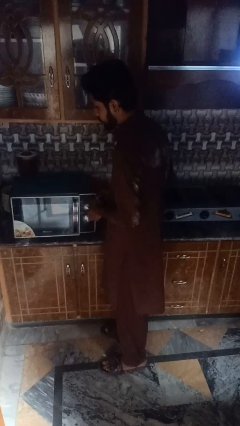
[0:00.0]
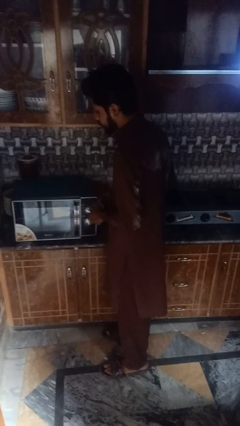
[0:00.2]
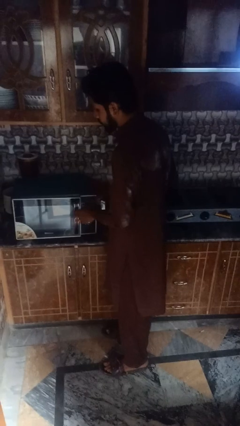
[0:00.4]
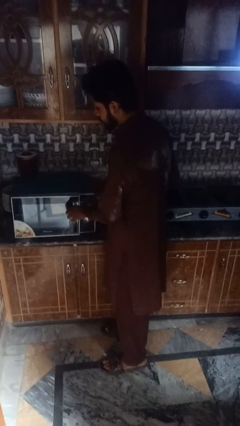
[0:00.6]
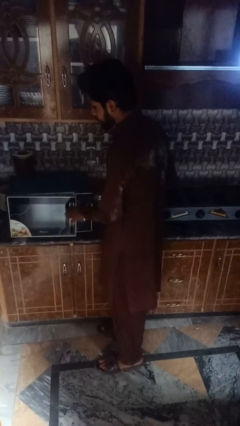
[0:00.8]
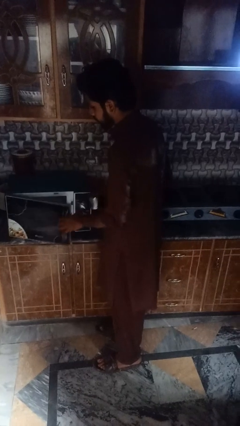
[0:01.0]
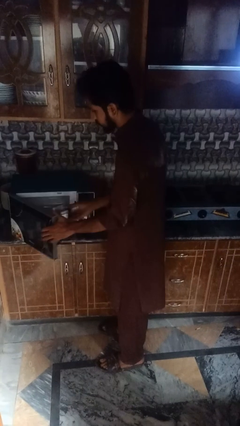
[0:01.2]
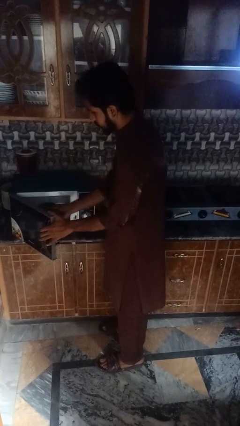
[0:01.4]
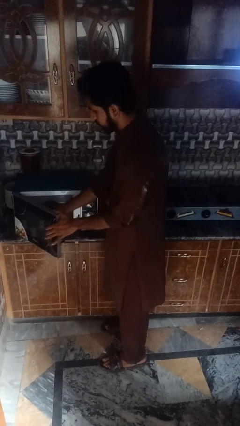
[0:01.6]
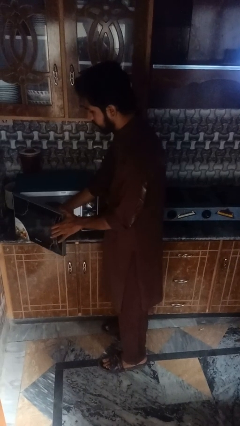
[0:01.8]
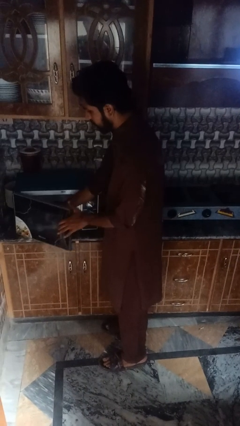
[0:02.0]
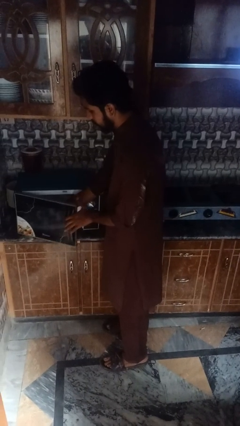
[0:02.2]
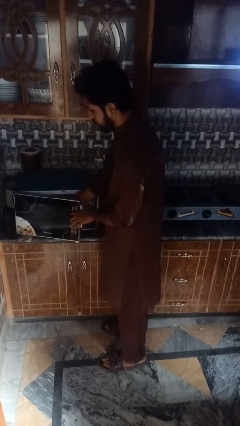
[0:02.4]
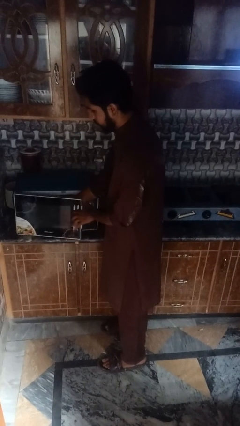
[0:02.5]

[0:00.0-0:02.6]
person puts object into microwave

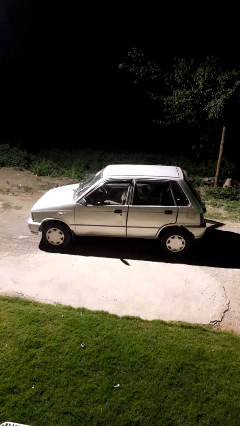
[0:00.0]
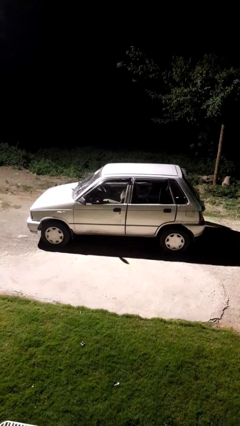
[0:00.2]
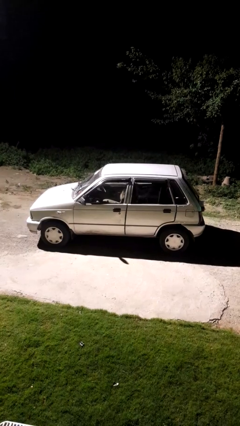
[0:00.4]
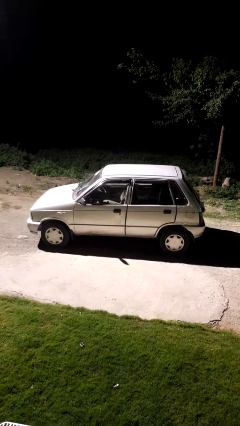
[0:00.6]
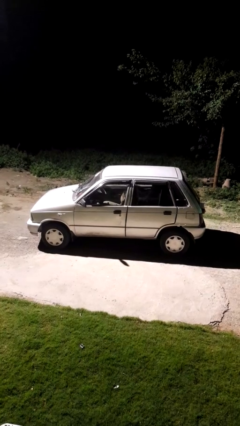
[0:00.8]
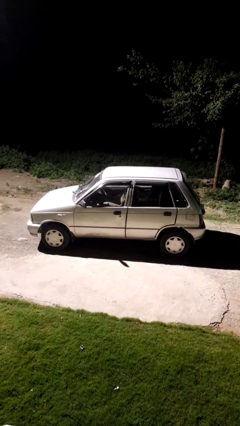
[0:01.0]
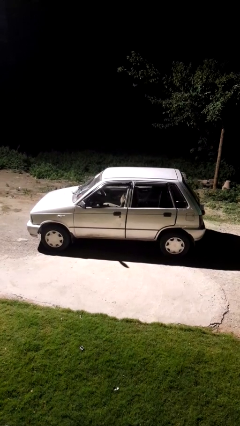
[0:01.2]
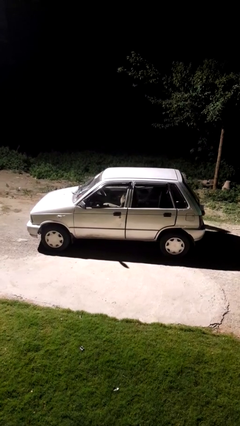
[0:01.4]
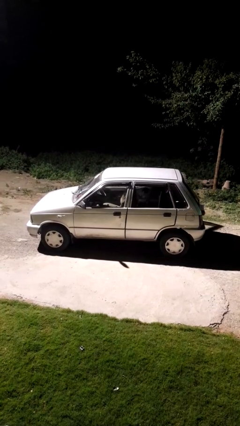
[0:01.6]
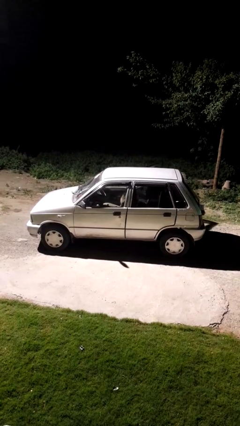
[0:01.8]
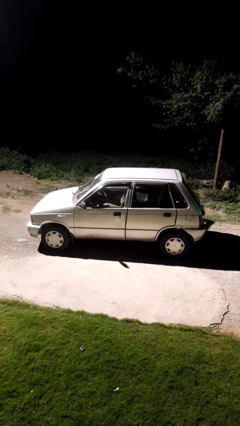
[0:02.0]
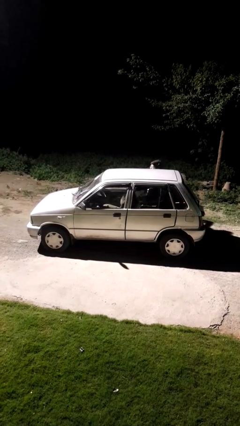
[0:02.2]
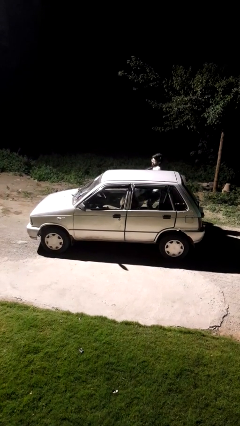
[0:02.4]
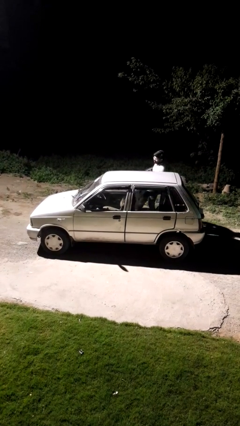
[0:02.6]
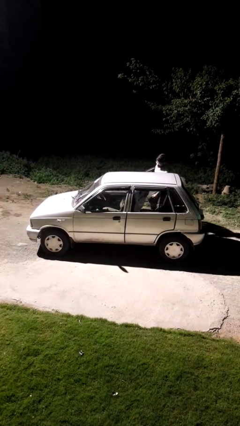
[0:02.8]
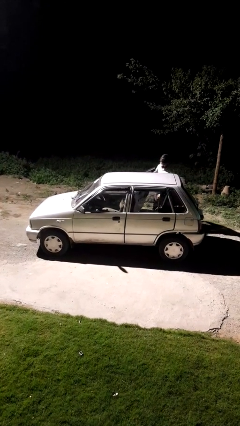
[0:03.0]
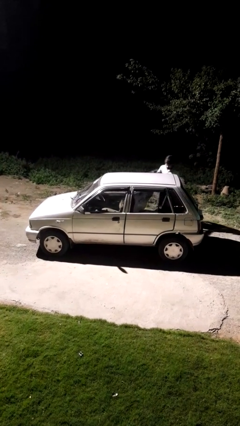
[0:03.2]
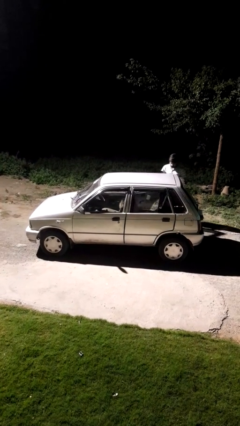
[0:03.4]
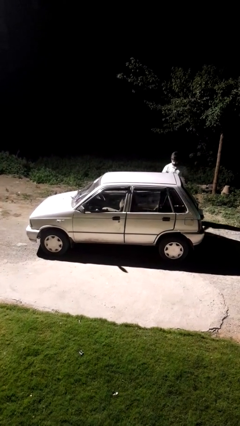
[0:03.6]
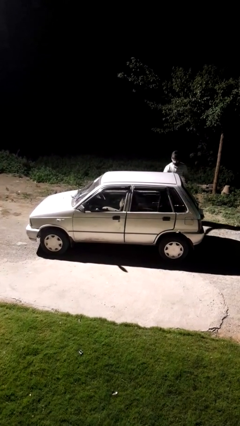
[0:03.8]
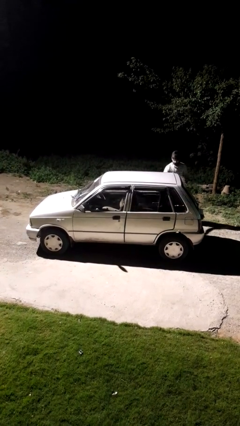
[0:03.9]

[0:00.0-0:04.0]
car drops off person

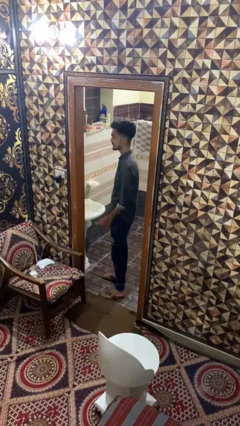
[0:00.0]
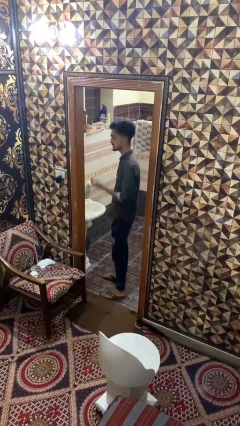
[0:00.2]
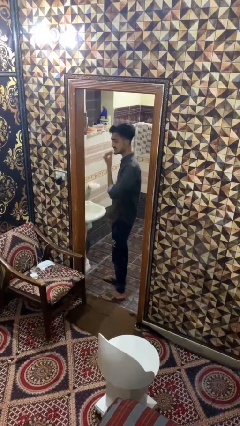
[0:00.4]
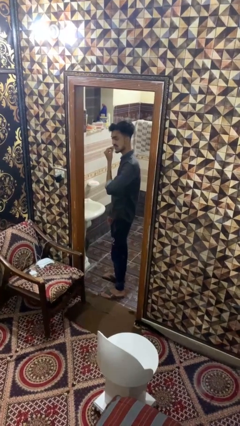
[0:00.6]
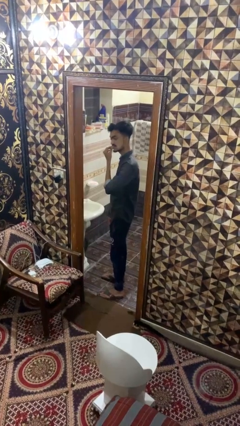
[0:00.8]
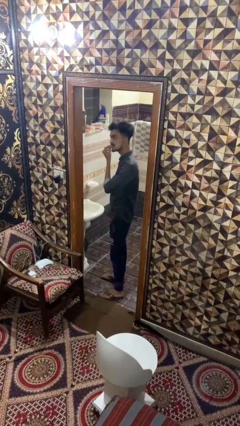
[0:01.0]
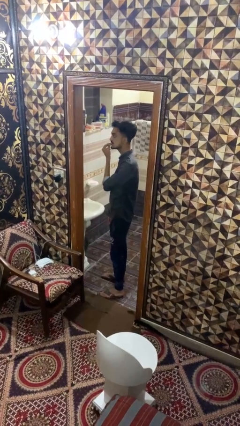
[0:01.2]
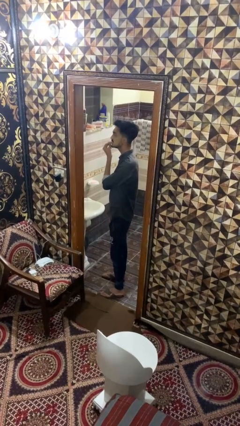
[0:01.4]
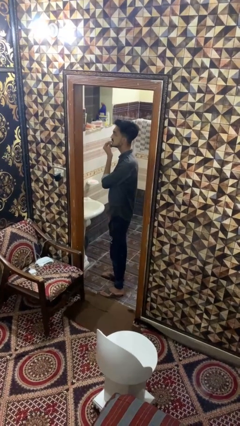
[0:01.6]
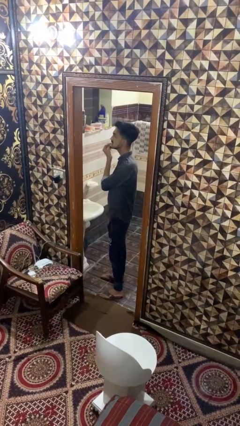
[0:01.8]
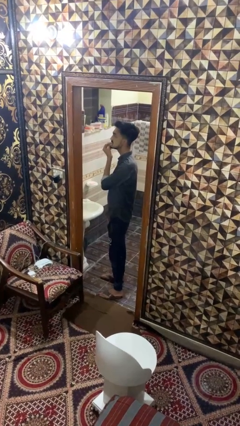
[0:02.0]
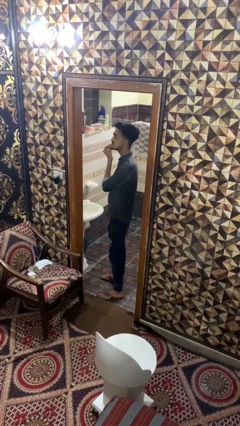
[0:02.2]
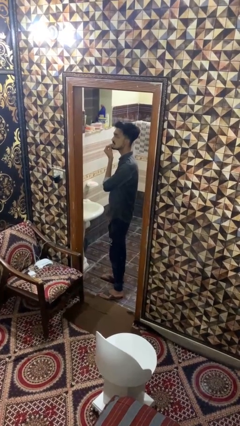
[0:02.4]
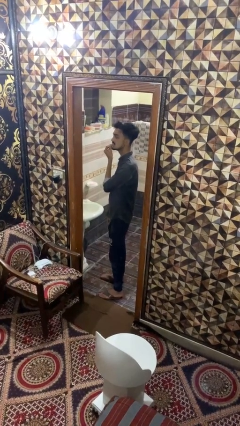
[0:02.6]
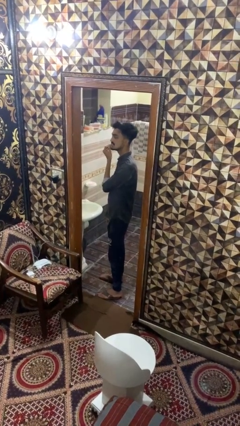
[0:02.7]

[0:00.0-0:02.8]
person flosses

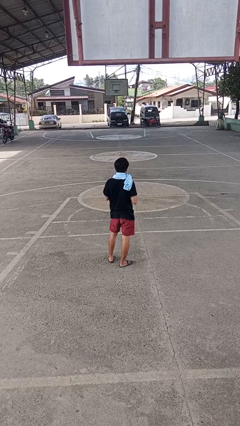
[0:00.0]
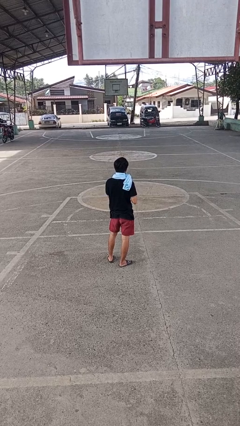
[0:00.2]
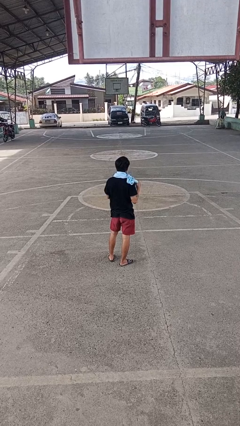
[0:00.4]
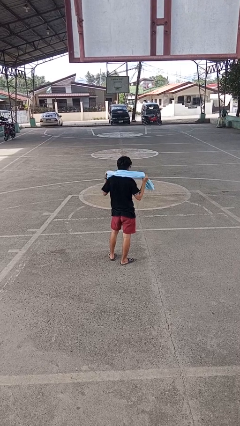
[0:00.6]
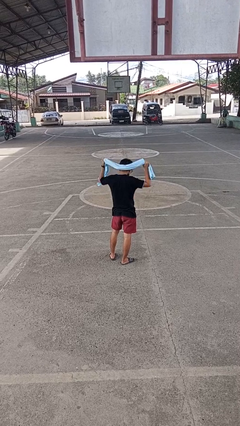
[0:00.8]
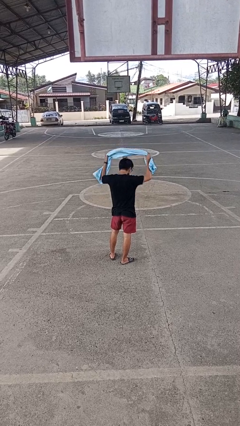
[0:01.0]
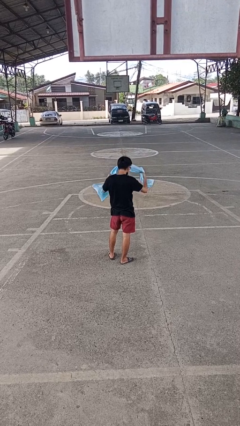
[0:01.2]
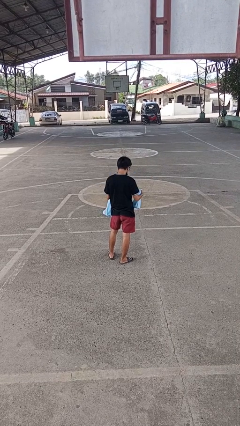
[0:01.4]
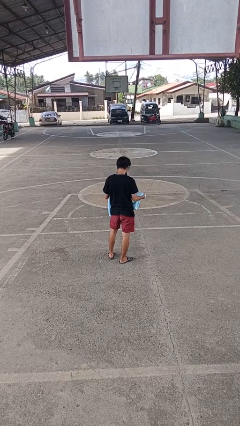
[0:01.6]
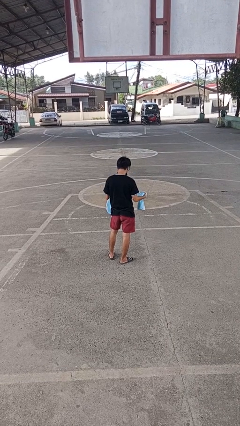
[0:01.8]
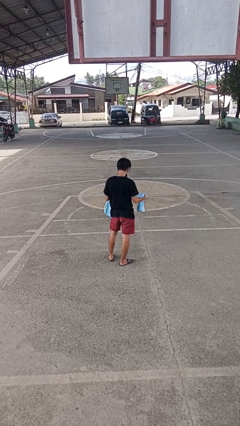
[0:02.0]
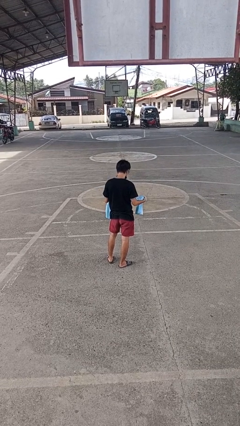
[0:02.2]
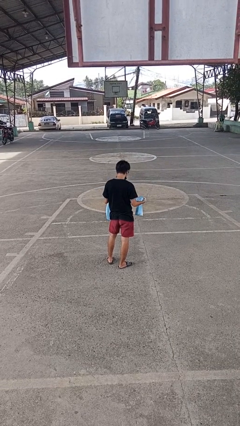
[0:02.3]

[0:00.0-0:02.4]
person takes off scarf

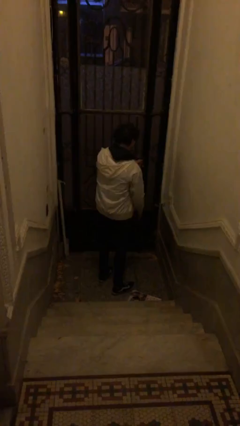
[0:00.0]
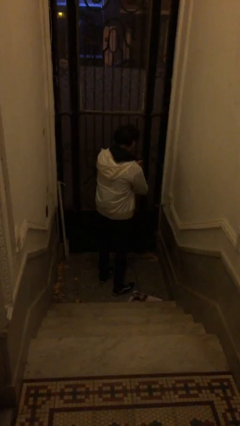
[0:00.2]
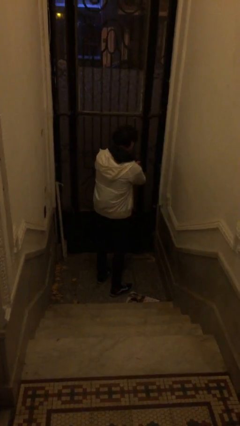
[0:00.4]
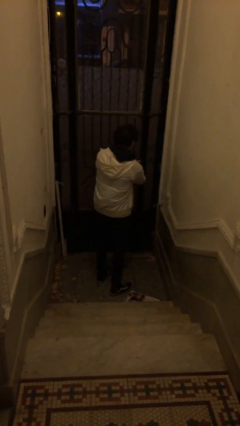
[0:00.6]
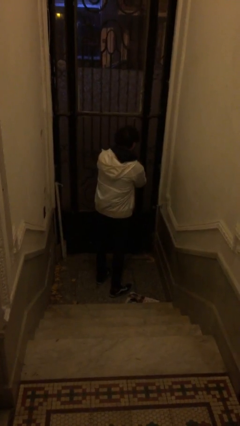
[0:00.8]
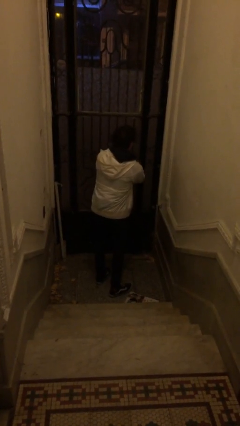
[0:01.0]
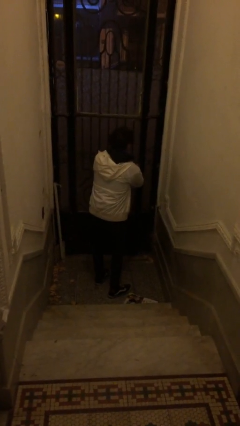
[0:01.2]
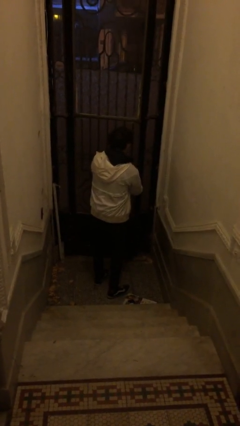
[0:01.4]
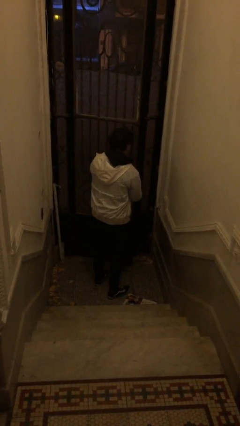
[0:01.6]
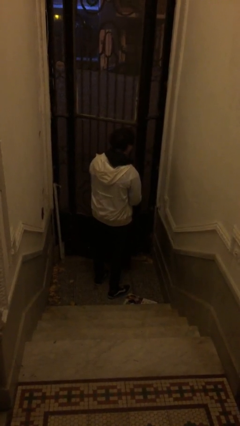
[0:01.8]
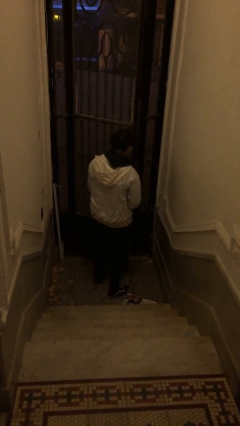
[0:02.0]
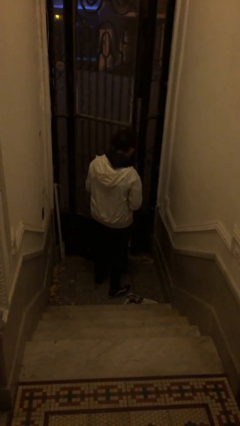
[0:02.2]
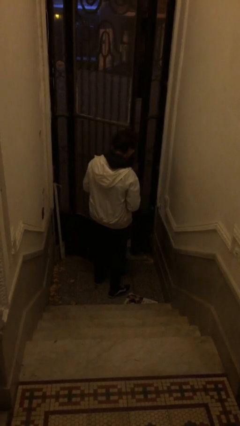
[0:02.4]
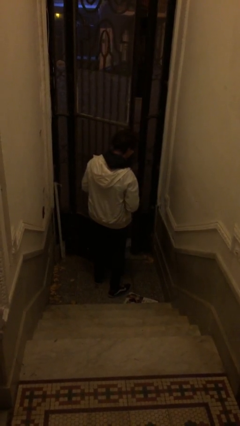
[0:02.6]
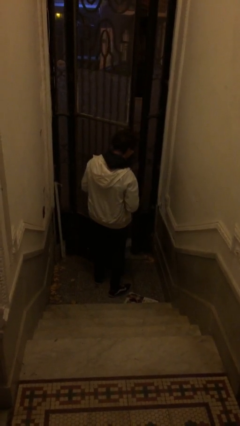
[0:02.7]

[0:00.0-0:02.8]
person opens facility door

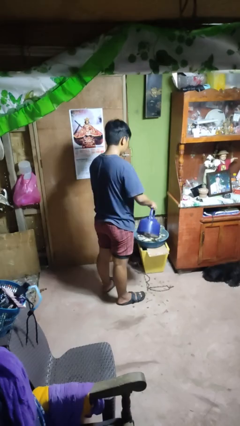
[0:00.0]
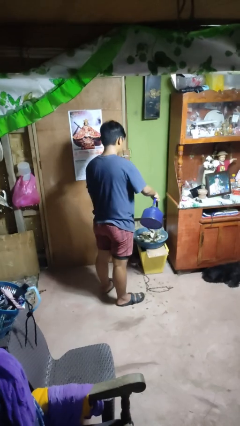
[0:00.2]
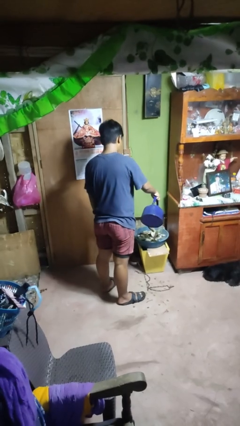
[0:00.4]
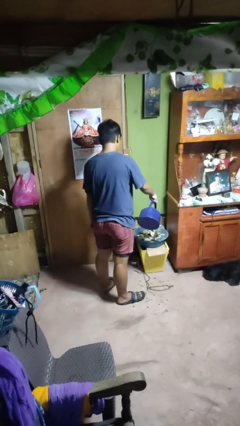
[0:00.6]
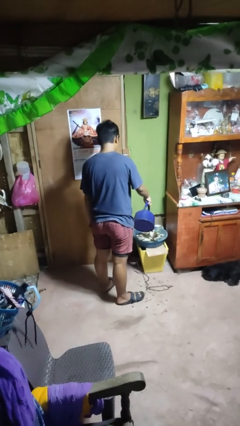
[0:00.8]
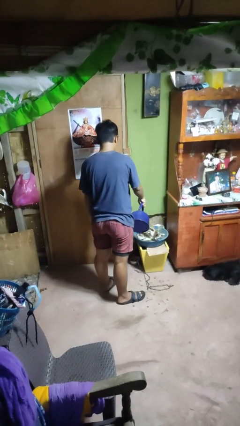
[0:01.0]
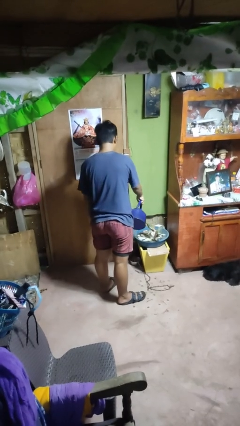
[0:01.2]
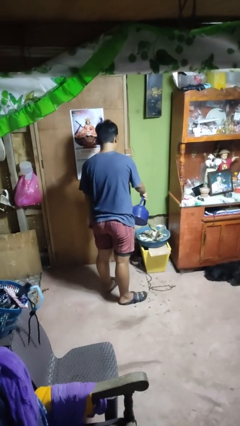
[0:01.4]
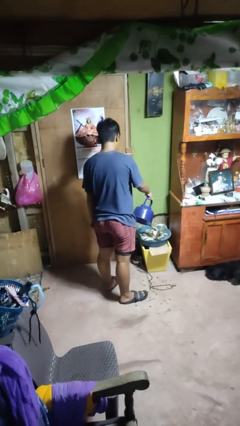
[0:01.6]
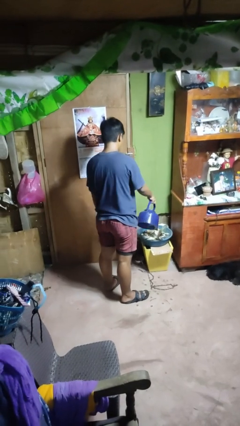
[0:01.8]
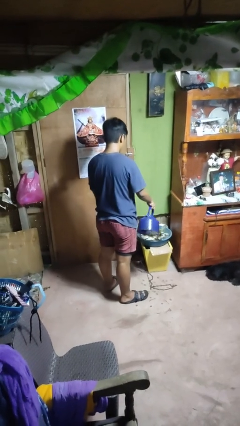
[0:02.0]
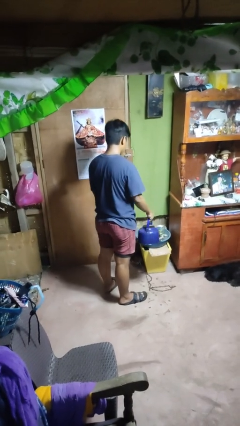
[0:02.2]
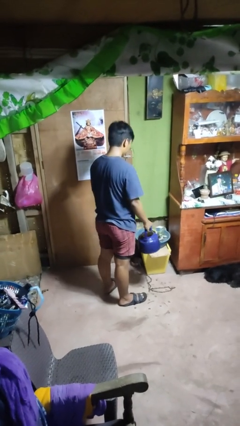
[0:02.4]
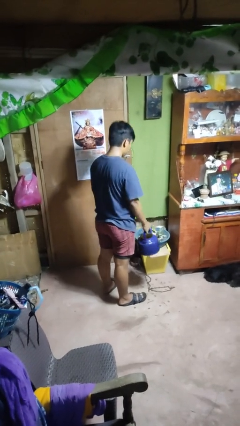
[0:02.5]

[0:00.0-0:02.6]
person waters houseplant

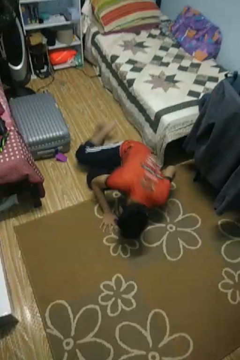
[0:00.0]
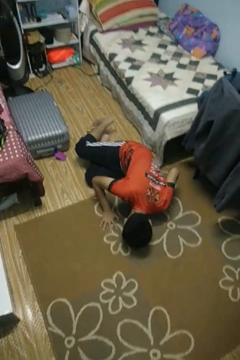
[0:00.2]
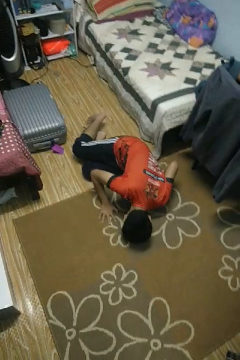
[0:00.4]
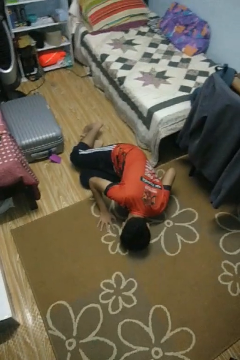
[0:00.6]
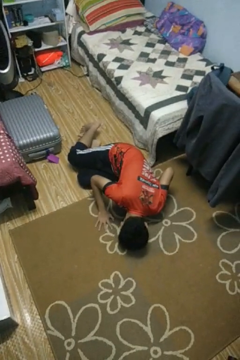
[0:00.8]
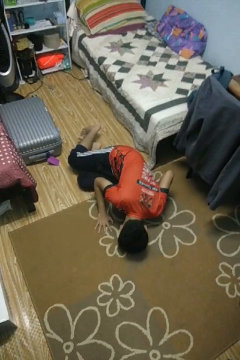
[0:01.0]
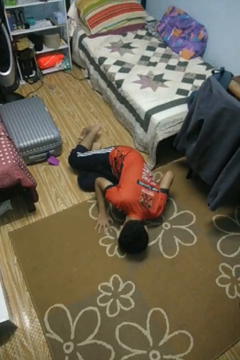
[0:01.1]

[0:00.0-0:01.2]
person lies down on floor
